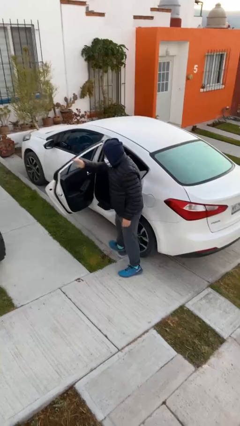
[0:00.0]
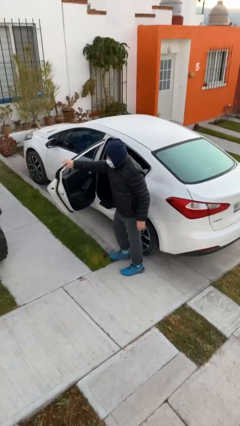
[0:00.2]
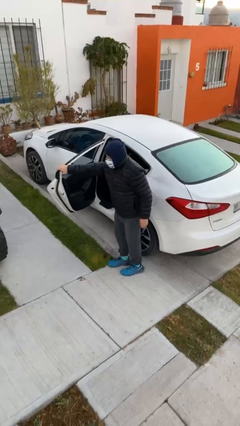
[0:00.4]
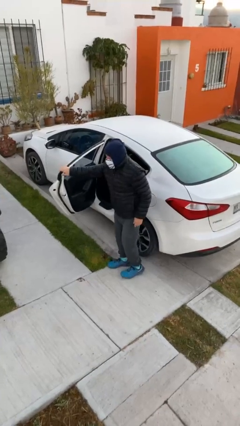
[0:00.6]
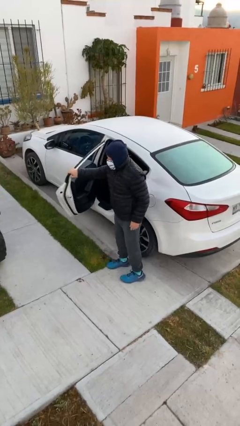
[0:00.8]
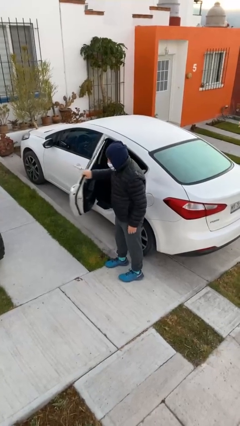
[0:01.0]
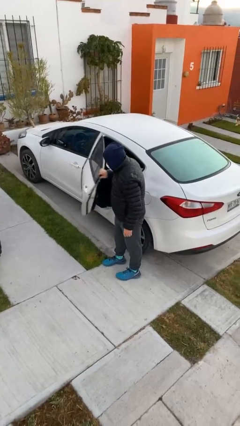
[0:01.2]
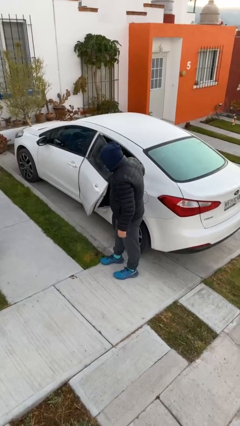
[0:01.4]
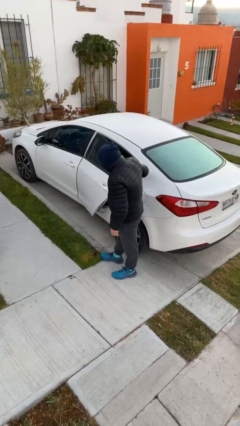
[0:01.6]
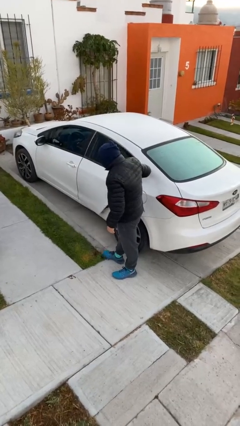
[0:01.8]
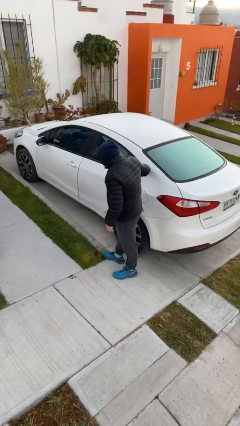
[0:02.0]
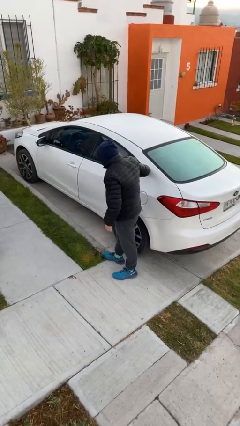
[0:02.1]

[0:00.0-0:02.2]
person closes car door

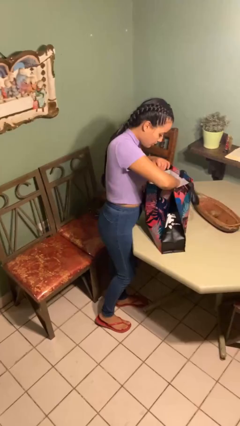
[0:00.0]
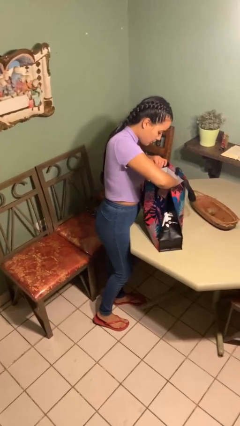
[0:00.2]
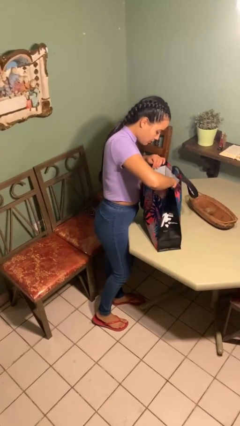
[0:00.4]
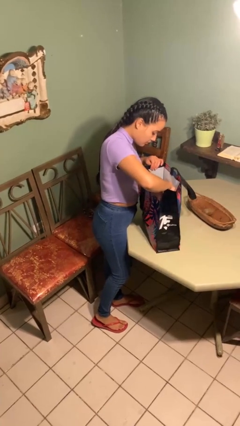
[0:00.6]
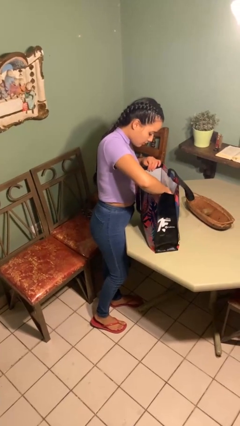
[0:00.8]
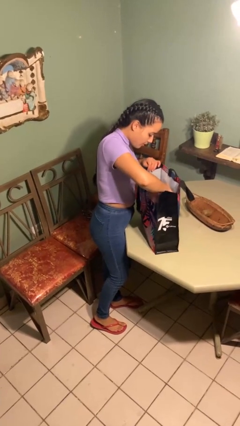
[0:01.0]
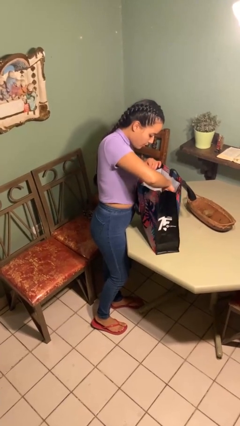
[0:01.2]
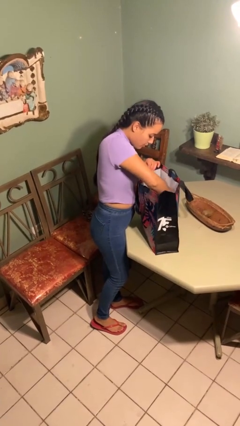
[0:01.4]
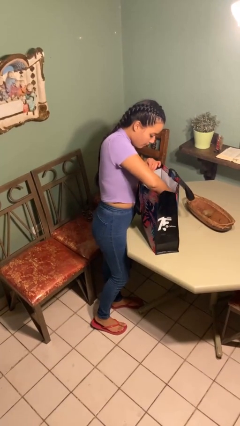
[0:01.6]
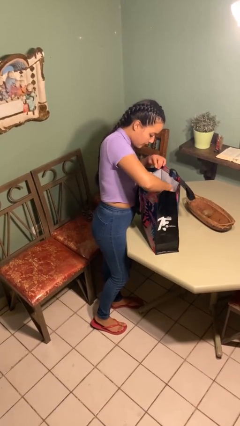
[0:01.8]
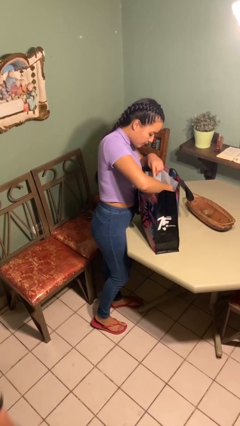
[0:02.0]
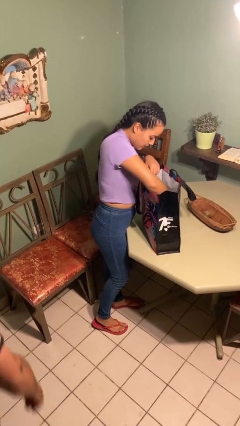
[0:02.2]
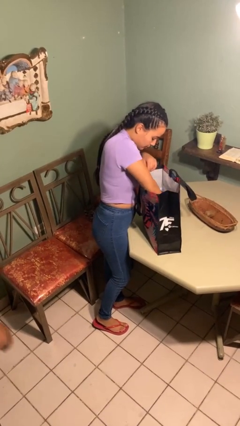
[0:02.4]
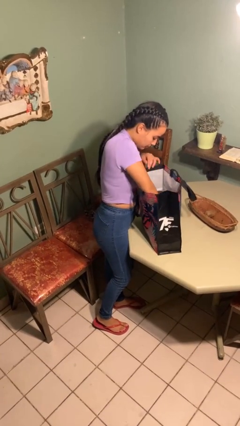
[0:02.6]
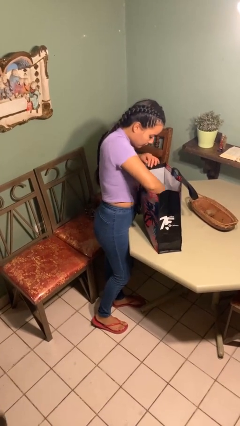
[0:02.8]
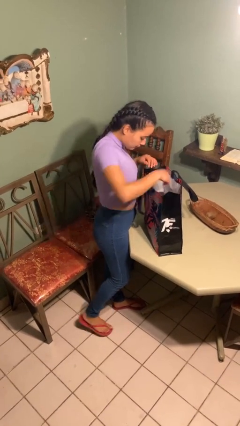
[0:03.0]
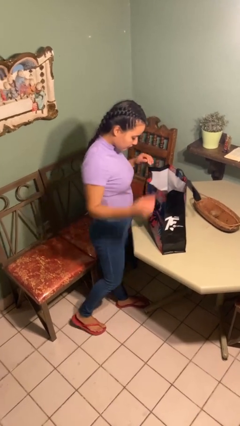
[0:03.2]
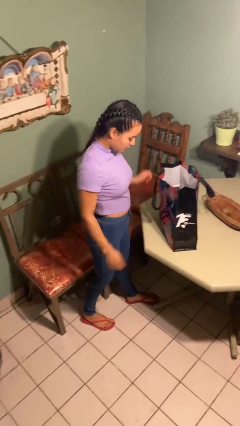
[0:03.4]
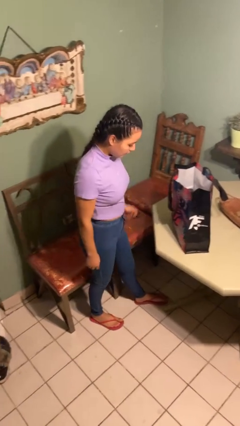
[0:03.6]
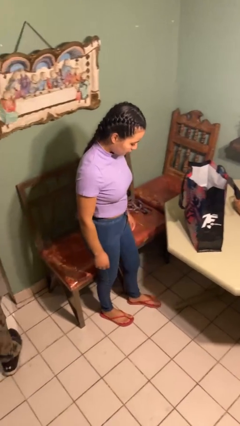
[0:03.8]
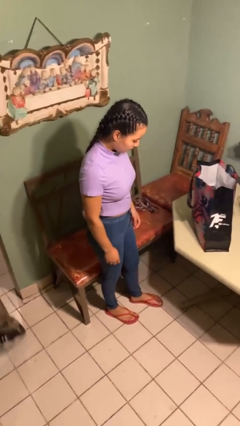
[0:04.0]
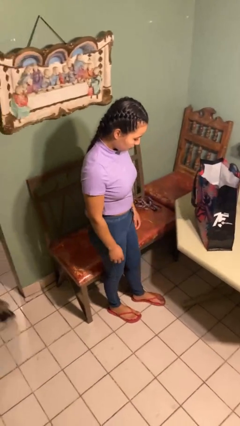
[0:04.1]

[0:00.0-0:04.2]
person searches in bag

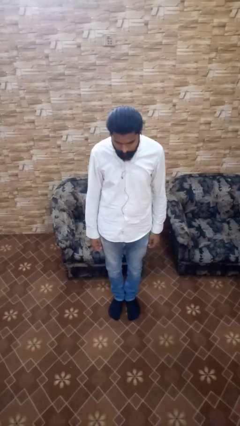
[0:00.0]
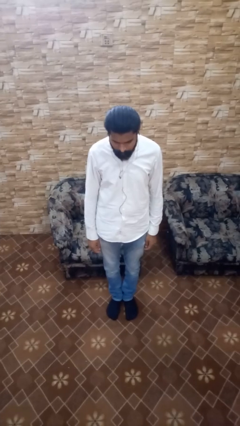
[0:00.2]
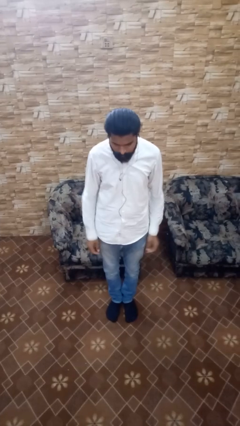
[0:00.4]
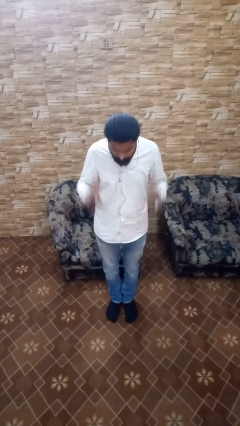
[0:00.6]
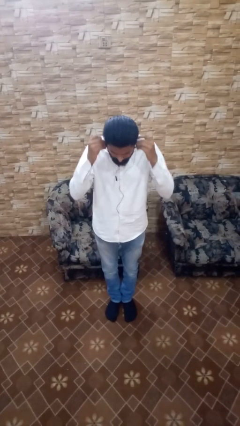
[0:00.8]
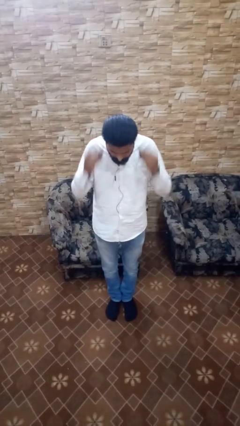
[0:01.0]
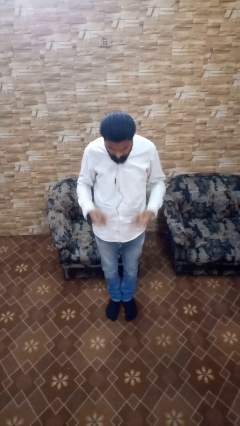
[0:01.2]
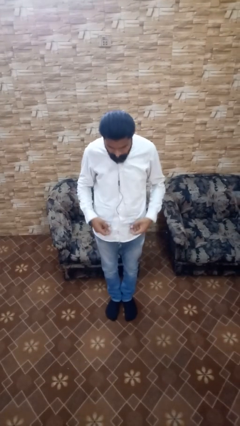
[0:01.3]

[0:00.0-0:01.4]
person takes off headphones

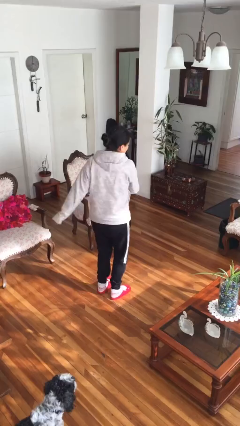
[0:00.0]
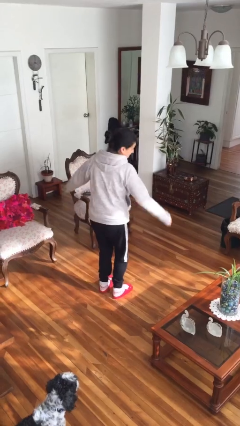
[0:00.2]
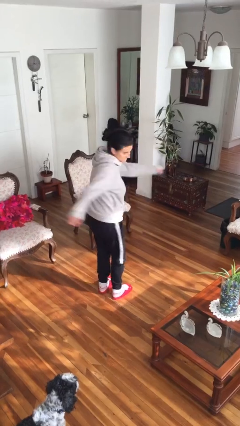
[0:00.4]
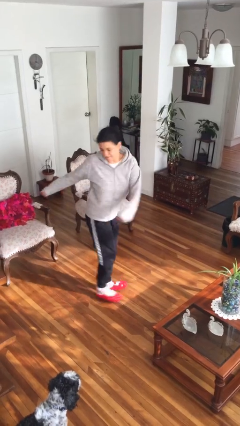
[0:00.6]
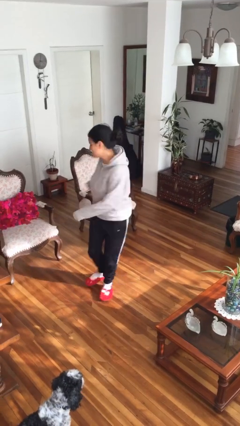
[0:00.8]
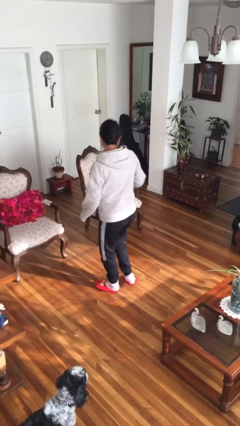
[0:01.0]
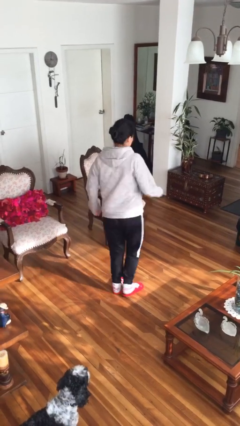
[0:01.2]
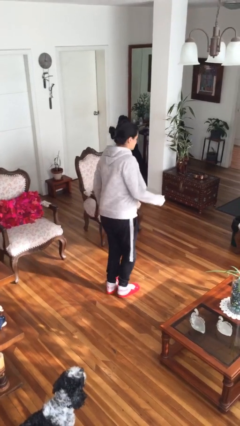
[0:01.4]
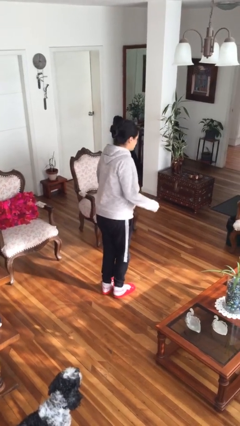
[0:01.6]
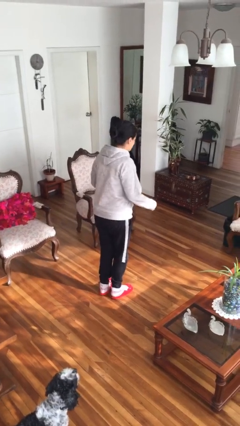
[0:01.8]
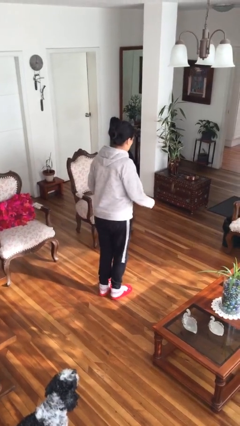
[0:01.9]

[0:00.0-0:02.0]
person twirls

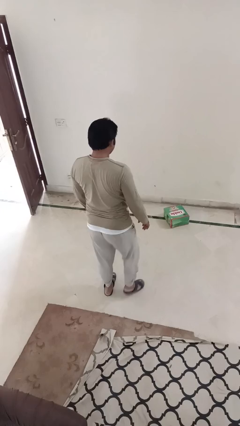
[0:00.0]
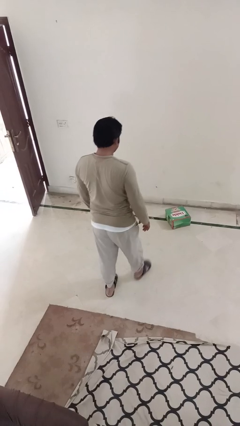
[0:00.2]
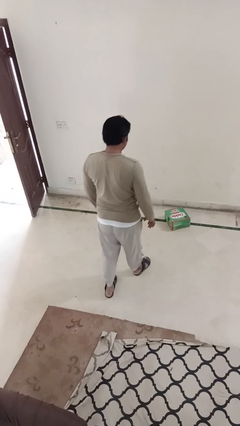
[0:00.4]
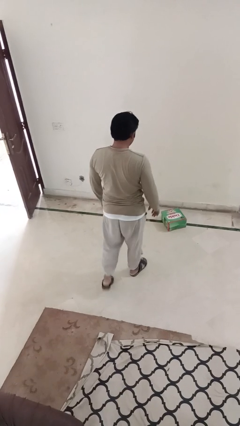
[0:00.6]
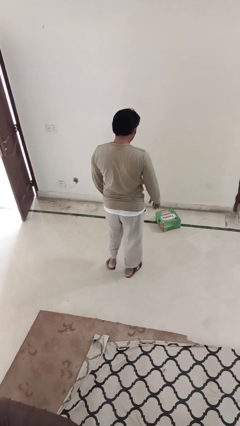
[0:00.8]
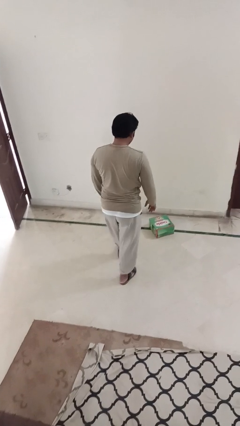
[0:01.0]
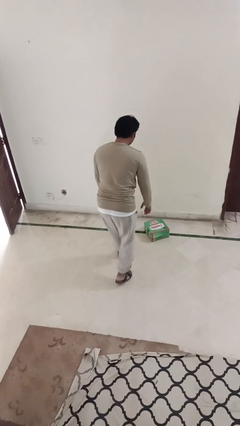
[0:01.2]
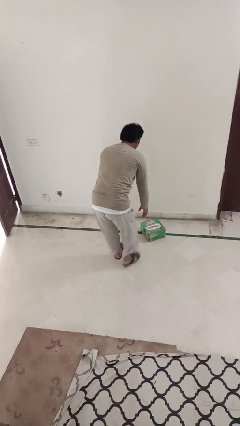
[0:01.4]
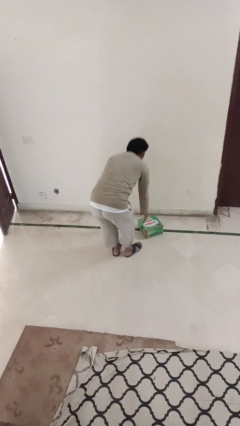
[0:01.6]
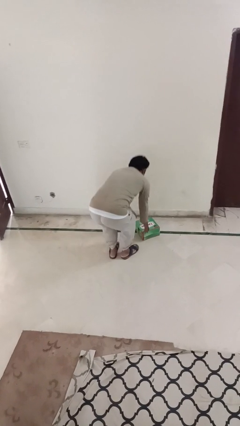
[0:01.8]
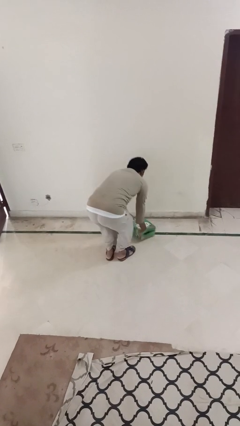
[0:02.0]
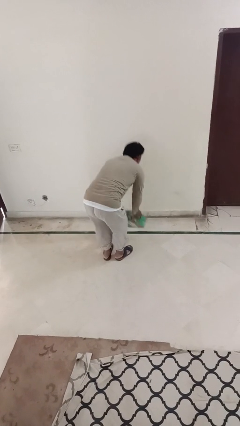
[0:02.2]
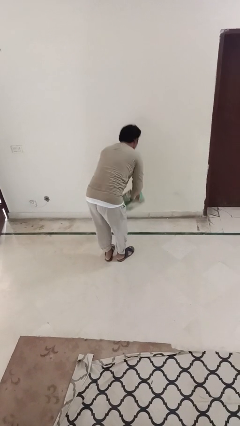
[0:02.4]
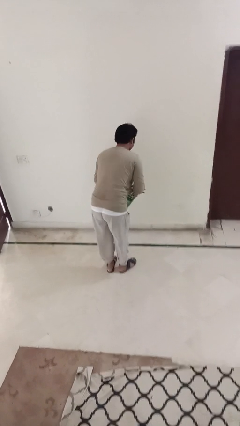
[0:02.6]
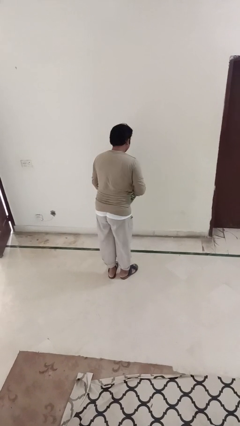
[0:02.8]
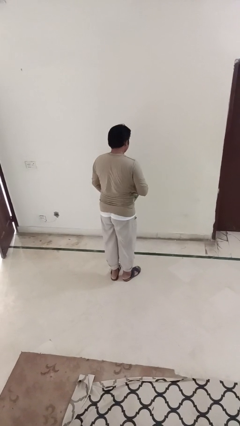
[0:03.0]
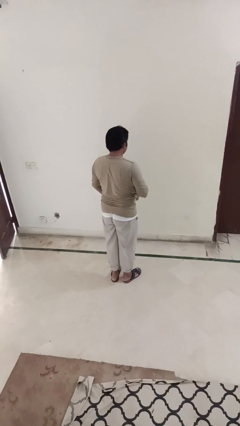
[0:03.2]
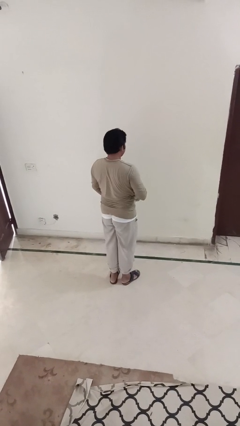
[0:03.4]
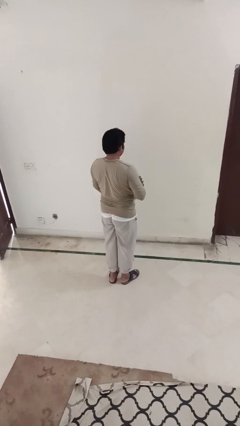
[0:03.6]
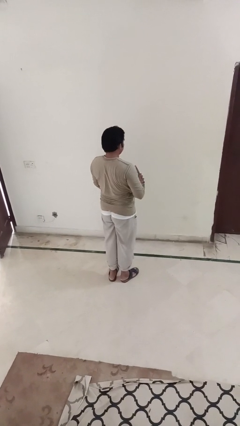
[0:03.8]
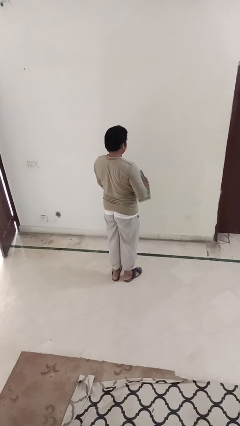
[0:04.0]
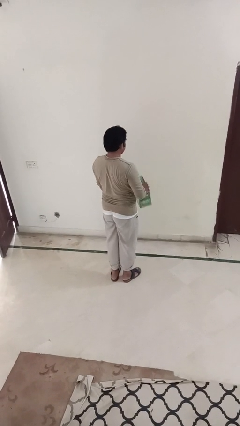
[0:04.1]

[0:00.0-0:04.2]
person picks up object from floor

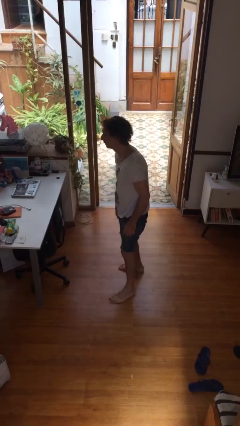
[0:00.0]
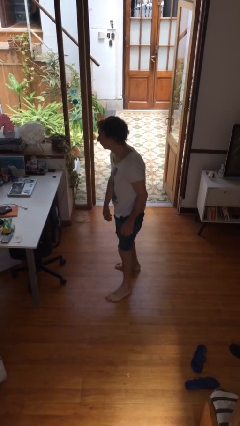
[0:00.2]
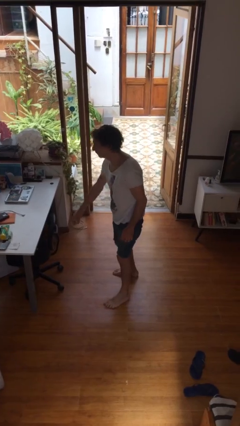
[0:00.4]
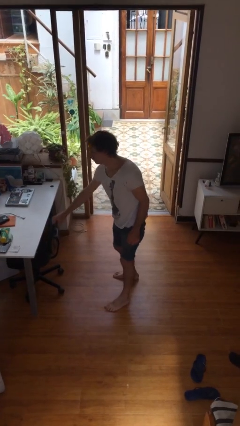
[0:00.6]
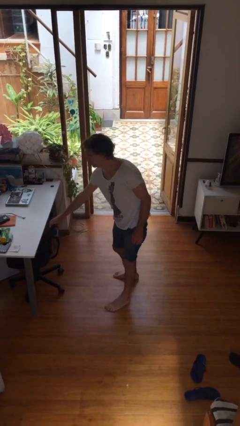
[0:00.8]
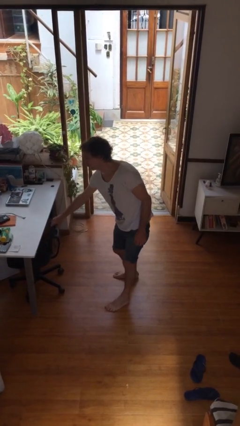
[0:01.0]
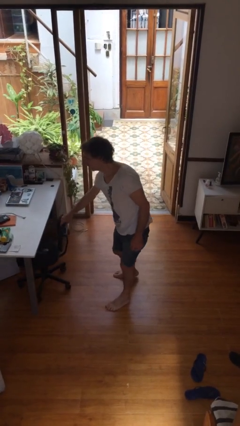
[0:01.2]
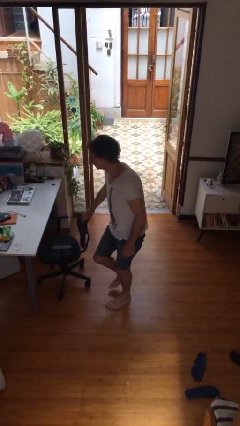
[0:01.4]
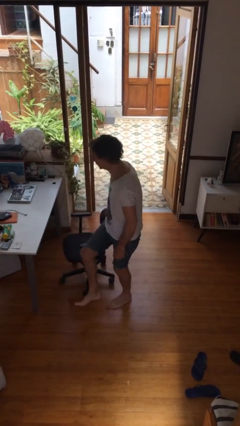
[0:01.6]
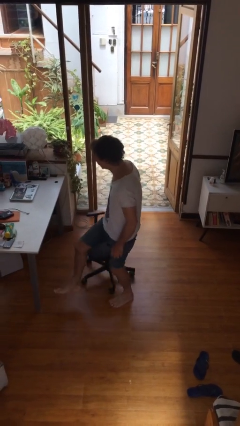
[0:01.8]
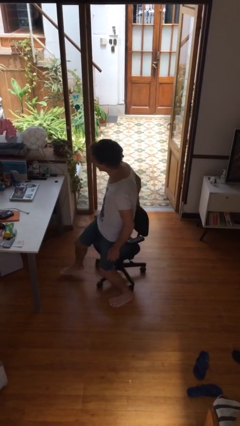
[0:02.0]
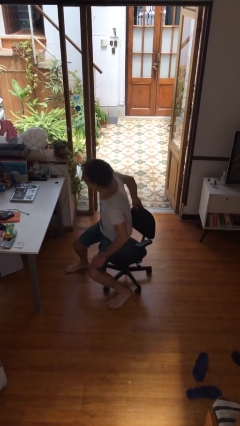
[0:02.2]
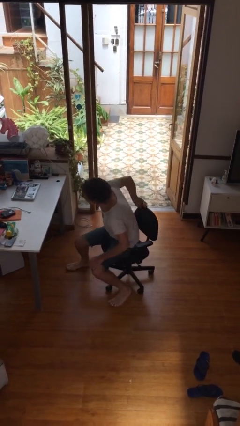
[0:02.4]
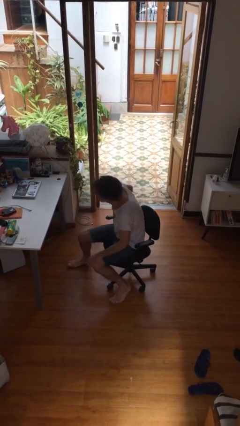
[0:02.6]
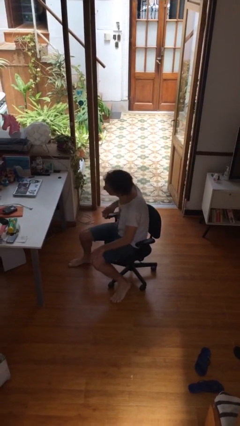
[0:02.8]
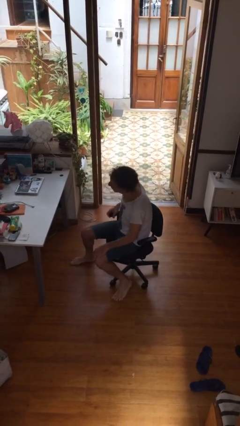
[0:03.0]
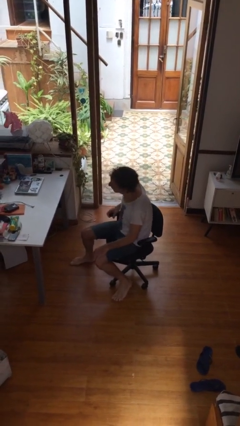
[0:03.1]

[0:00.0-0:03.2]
person sits down

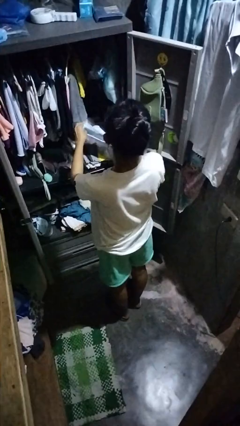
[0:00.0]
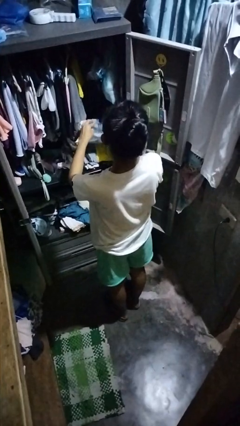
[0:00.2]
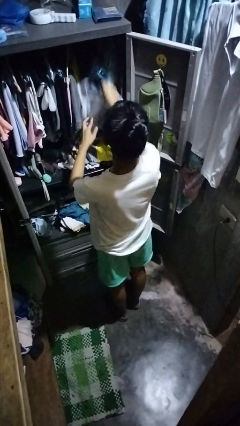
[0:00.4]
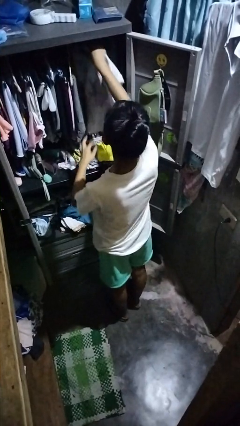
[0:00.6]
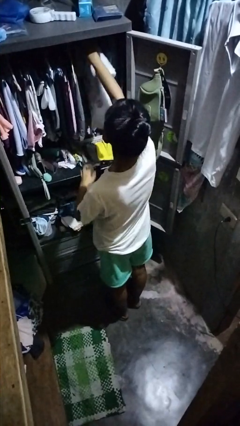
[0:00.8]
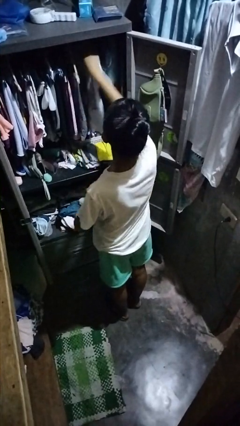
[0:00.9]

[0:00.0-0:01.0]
person puts clothes into closet
